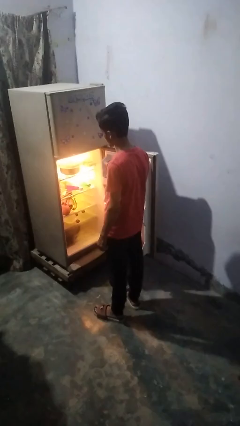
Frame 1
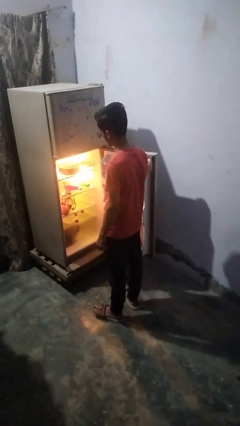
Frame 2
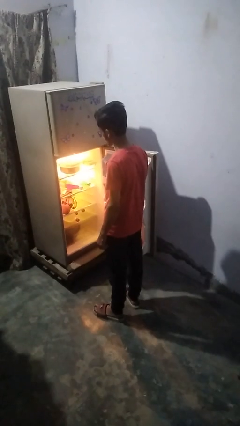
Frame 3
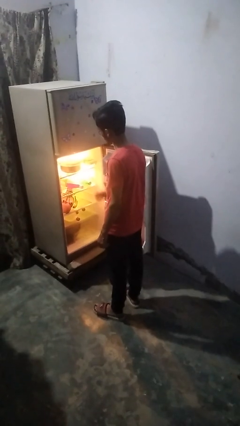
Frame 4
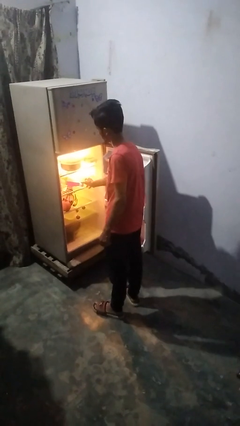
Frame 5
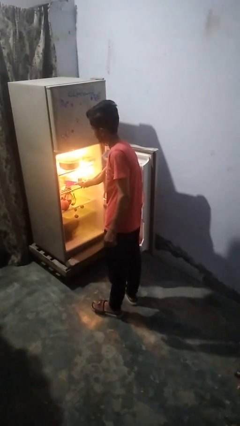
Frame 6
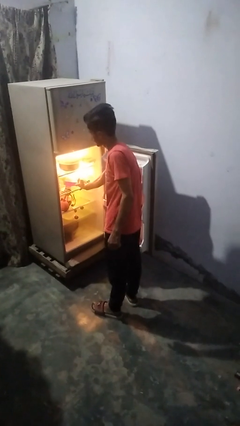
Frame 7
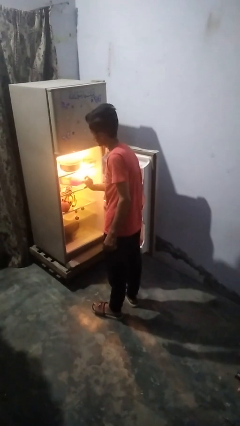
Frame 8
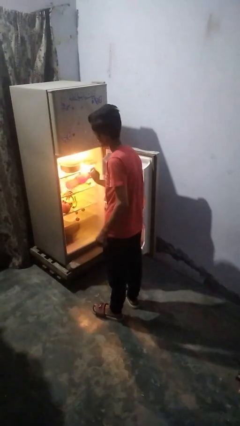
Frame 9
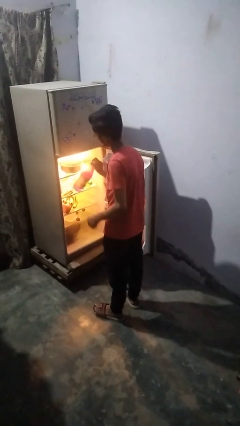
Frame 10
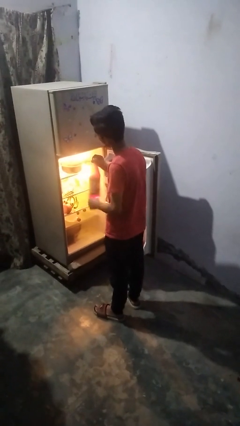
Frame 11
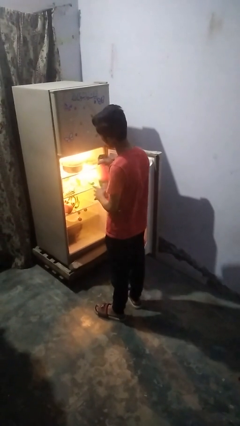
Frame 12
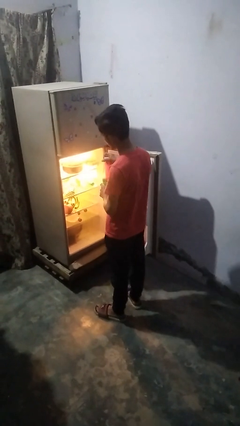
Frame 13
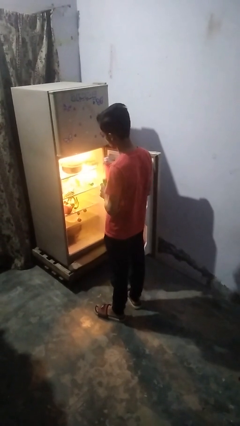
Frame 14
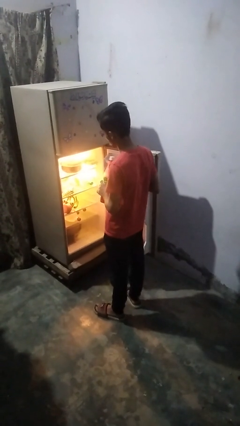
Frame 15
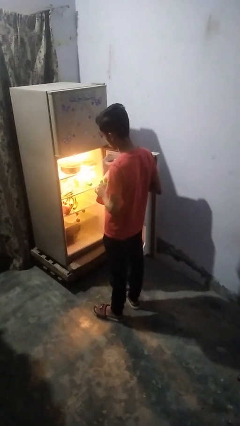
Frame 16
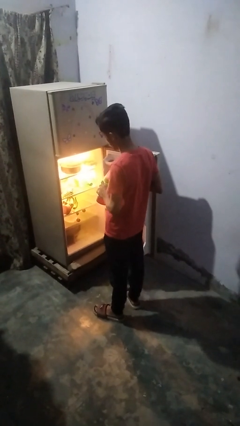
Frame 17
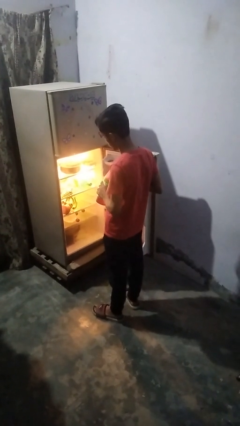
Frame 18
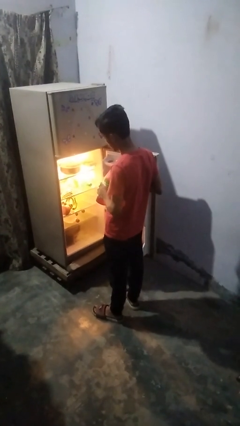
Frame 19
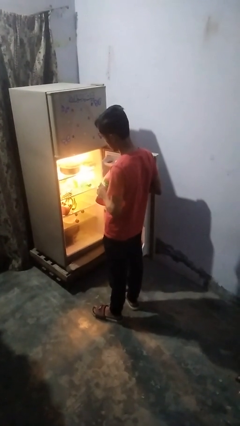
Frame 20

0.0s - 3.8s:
person puts object into refrigerator

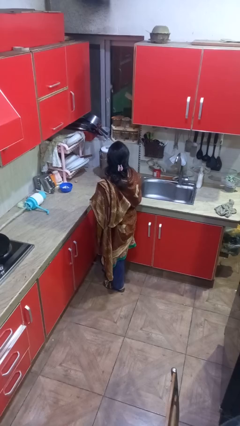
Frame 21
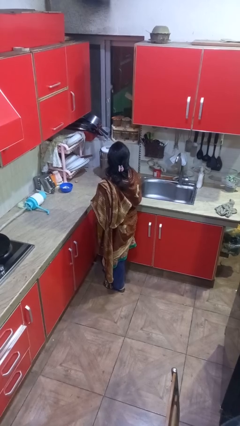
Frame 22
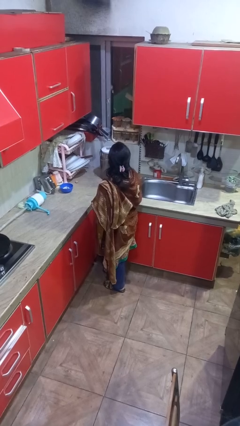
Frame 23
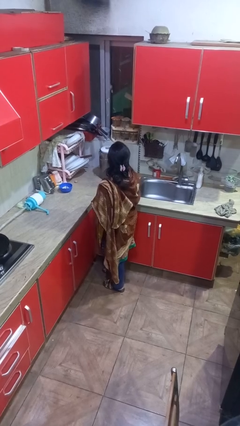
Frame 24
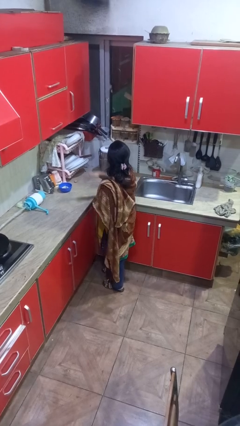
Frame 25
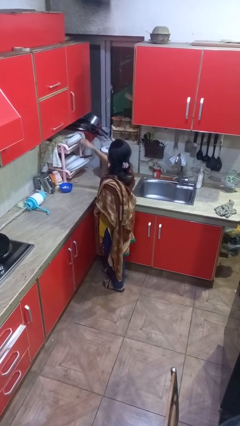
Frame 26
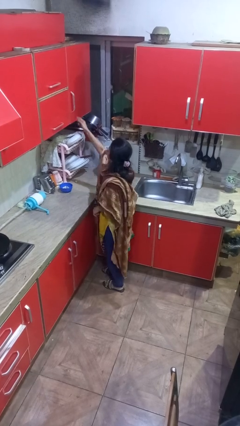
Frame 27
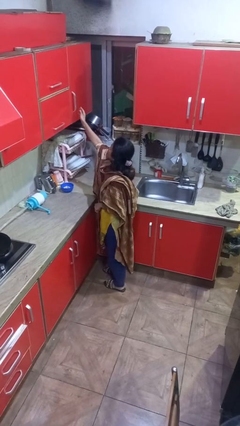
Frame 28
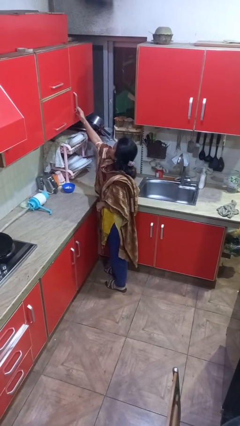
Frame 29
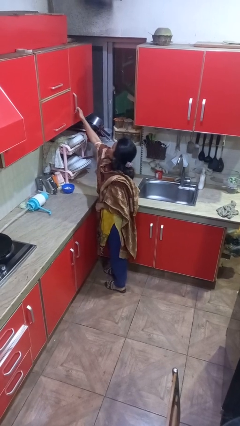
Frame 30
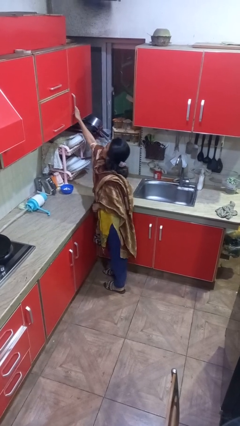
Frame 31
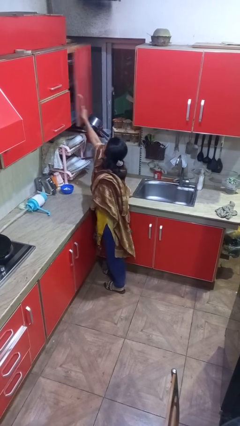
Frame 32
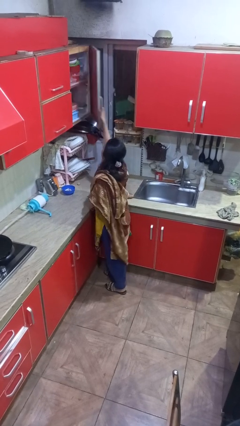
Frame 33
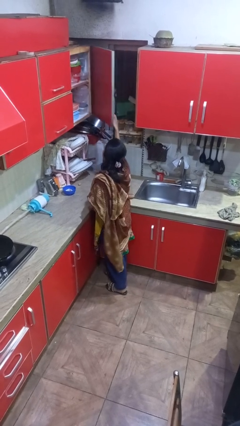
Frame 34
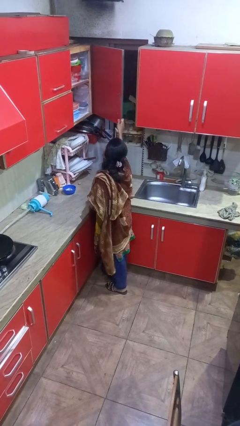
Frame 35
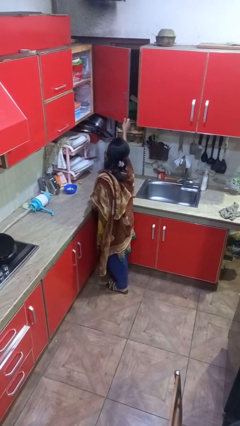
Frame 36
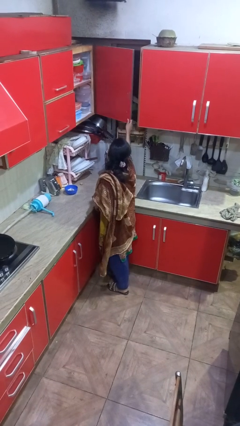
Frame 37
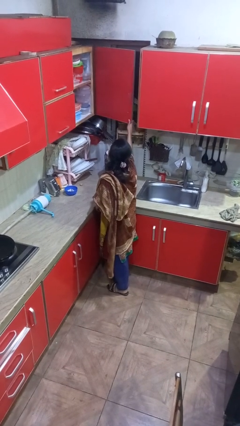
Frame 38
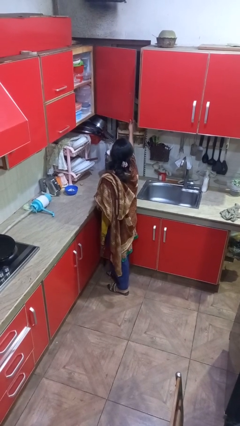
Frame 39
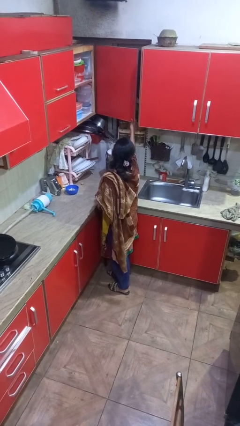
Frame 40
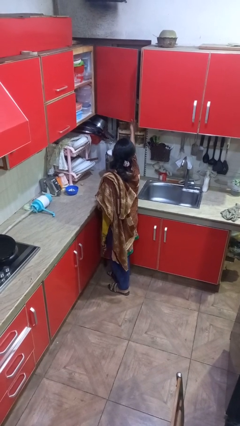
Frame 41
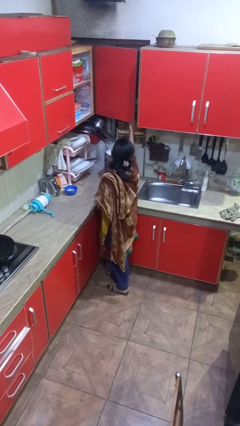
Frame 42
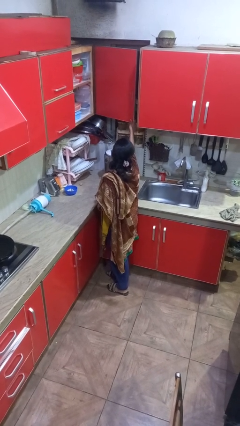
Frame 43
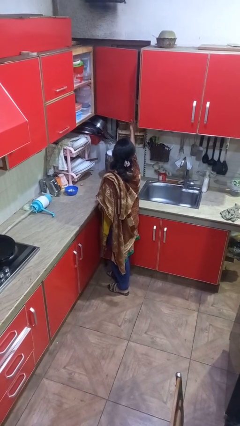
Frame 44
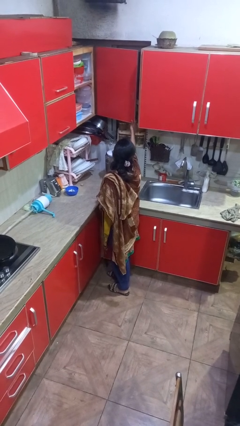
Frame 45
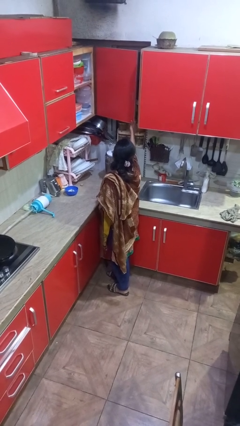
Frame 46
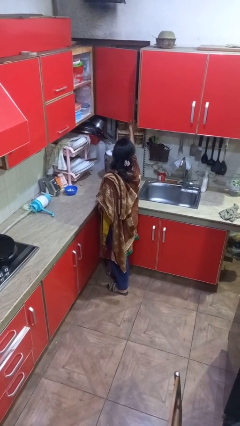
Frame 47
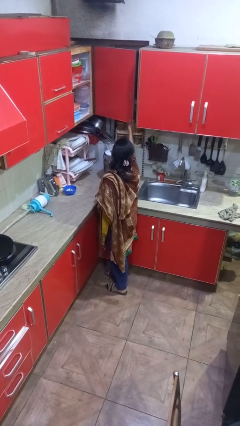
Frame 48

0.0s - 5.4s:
person opens cabinet

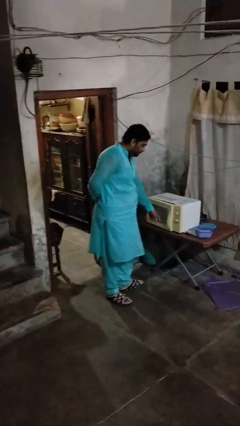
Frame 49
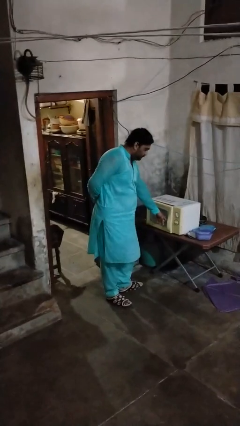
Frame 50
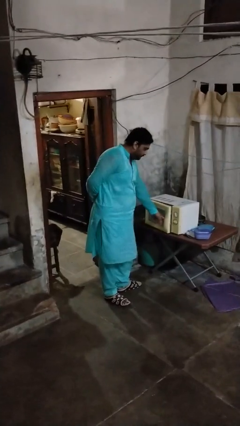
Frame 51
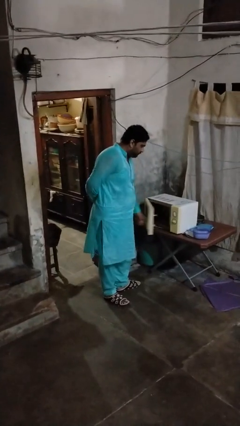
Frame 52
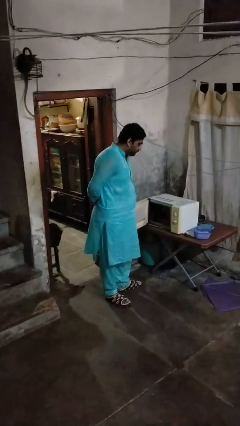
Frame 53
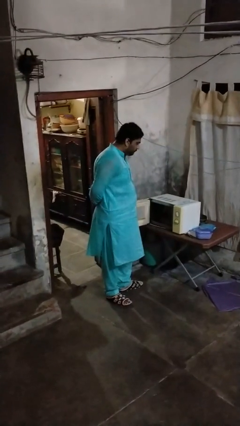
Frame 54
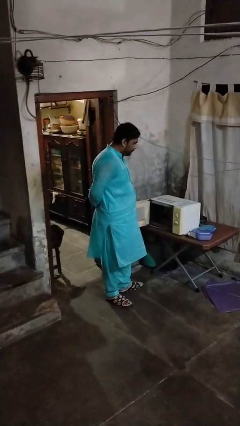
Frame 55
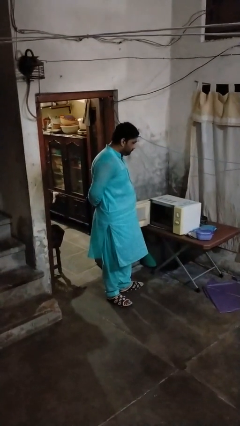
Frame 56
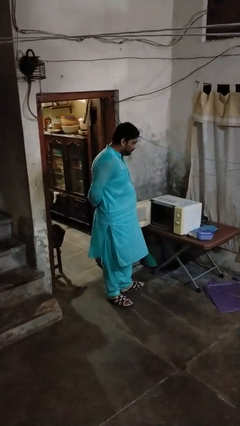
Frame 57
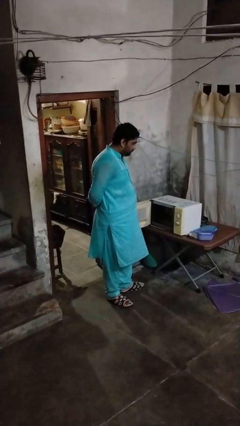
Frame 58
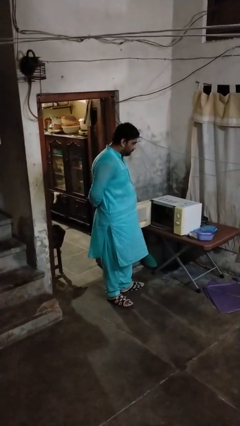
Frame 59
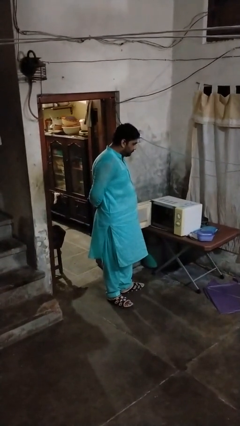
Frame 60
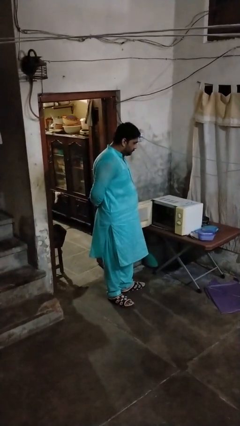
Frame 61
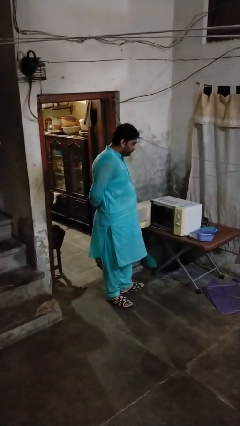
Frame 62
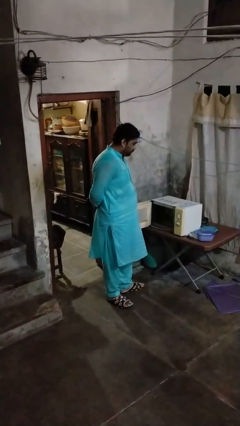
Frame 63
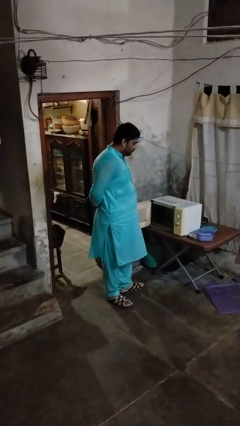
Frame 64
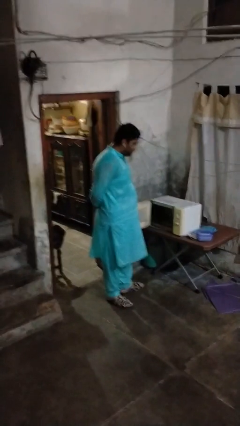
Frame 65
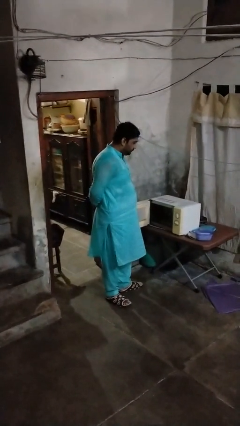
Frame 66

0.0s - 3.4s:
person opens microwave

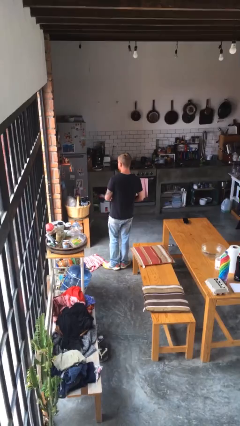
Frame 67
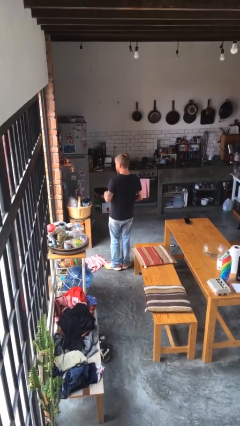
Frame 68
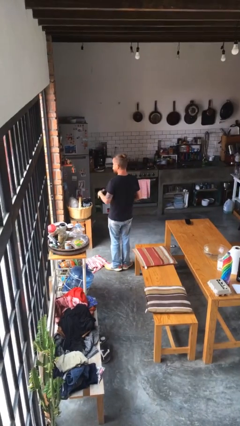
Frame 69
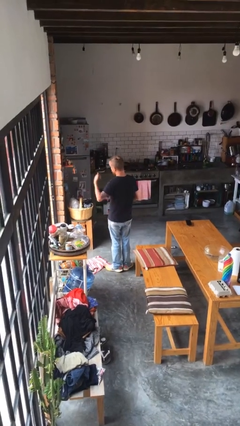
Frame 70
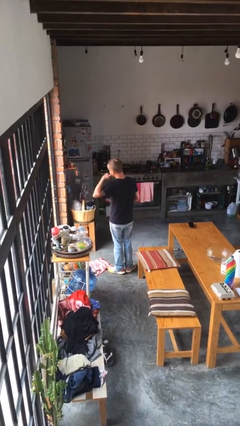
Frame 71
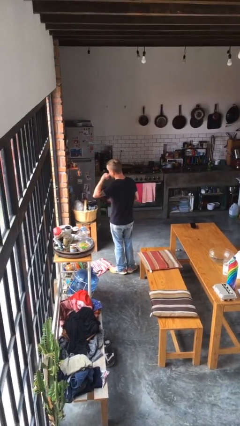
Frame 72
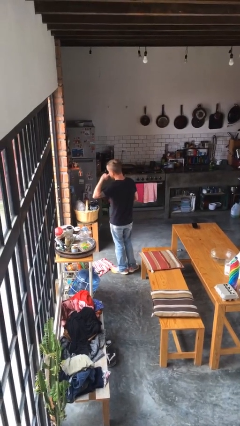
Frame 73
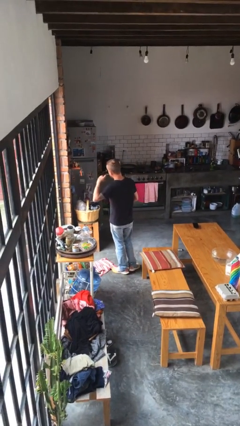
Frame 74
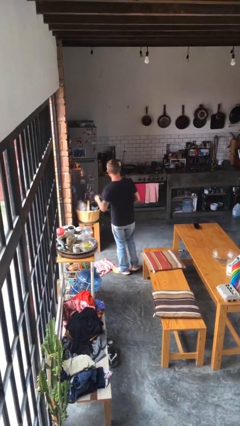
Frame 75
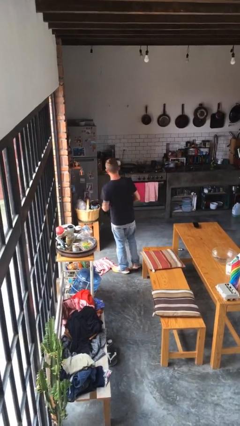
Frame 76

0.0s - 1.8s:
person gestures call me

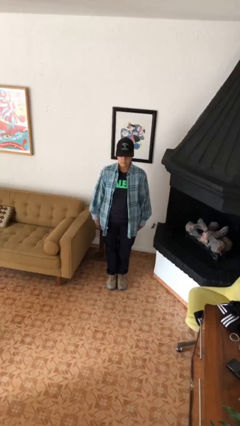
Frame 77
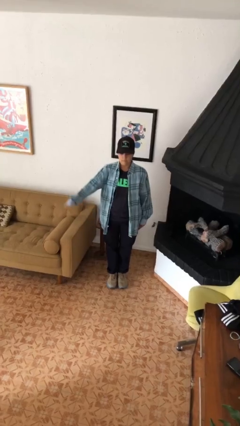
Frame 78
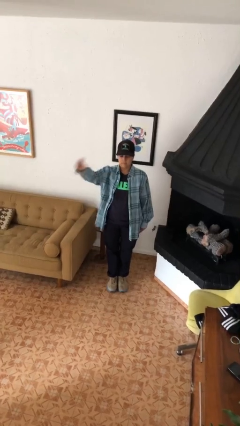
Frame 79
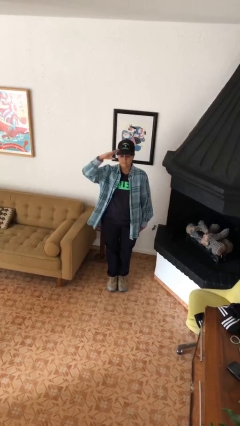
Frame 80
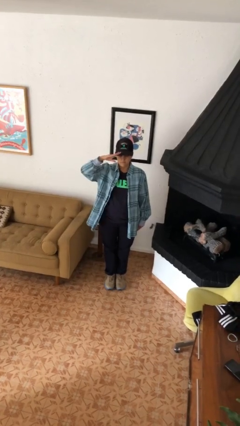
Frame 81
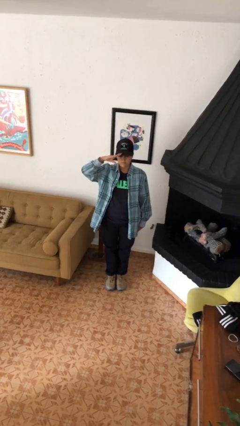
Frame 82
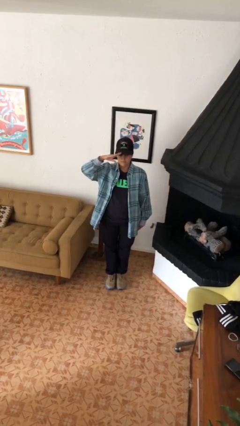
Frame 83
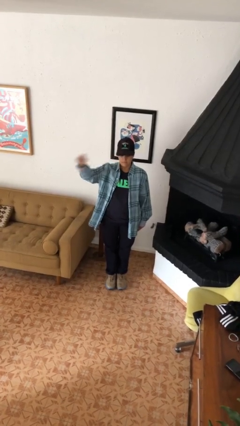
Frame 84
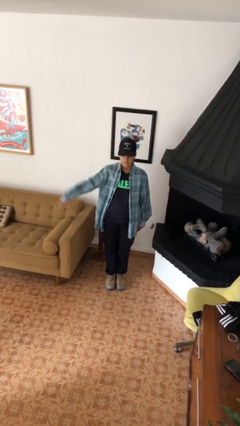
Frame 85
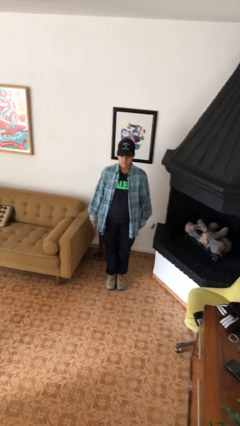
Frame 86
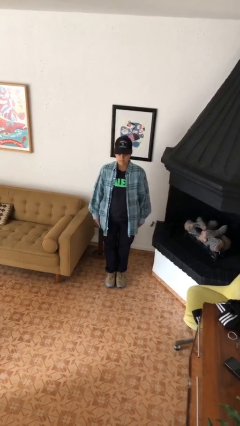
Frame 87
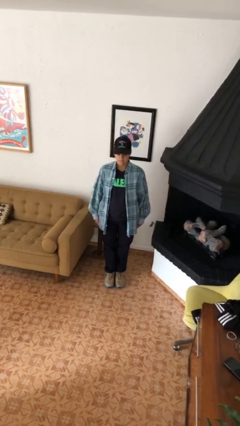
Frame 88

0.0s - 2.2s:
person salutes

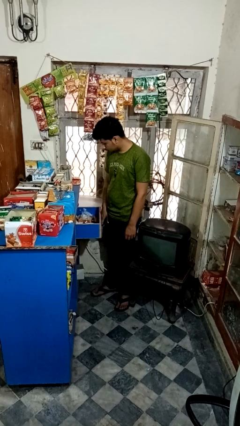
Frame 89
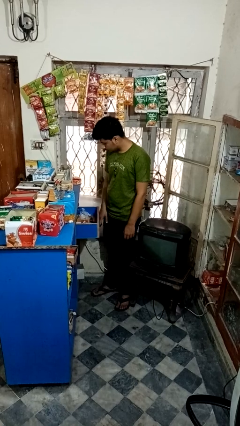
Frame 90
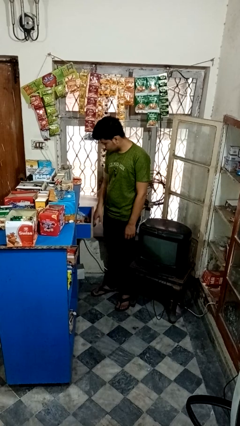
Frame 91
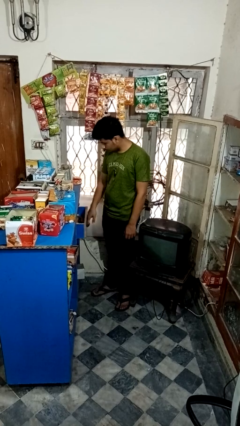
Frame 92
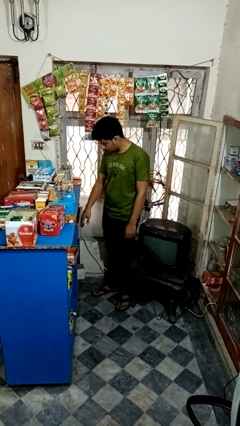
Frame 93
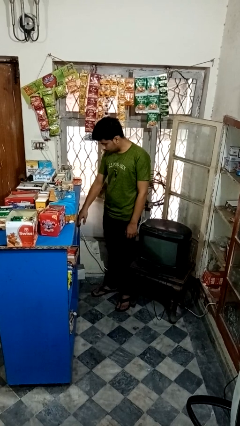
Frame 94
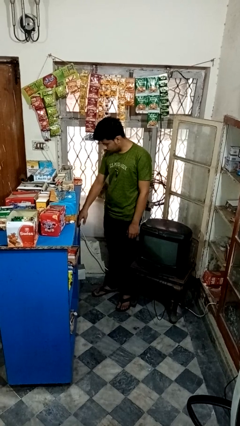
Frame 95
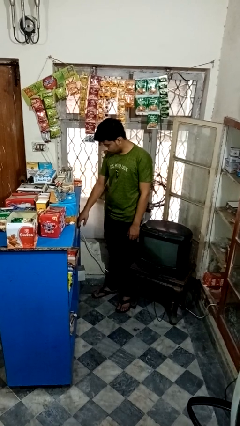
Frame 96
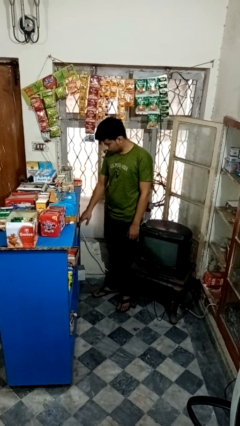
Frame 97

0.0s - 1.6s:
person closes kitchen drawer
